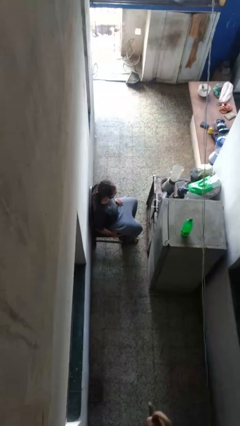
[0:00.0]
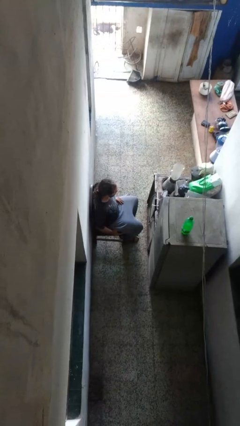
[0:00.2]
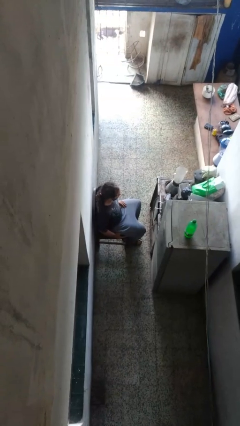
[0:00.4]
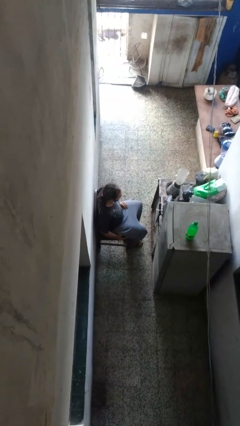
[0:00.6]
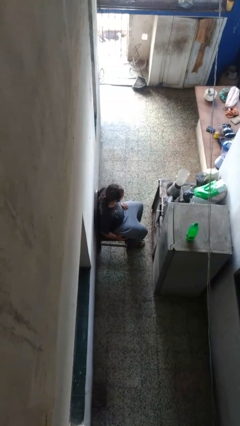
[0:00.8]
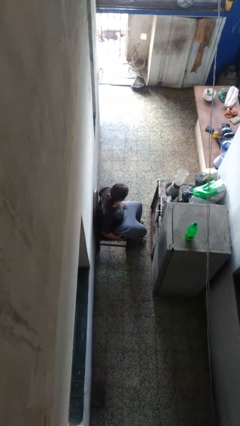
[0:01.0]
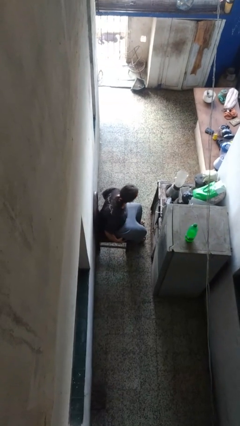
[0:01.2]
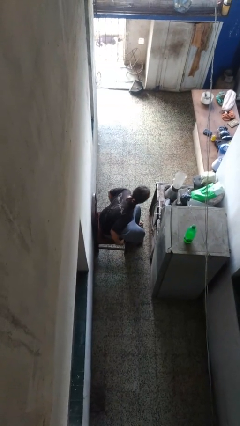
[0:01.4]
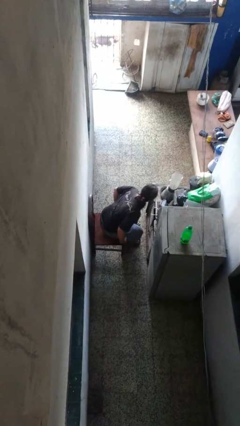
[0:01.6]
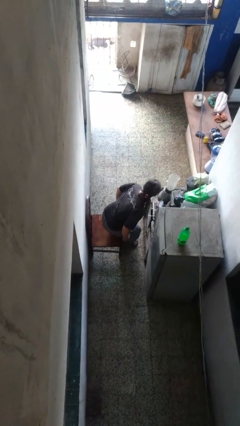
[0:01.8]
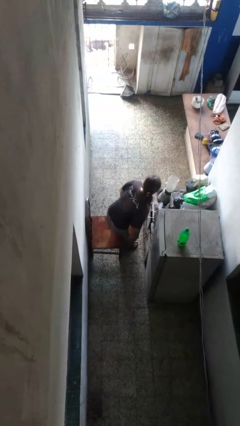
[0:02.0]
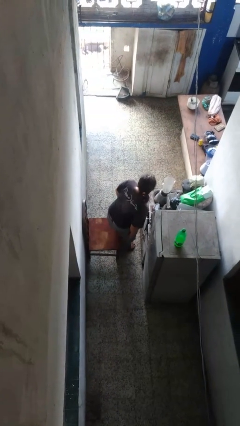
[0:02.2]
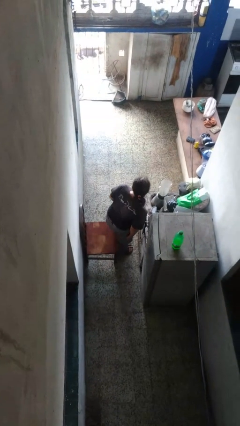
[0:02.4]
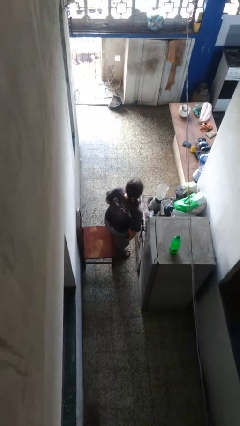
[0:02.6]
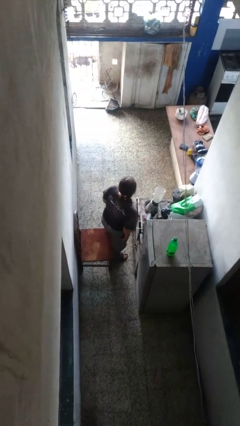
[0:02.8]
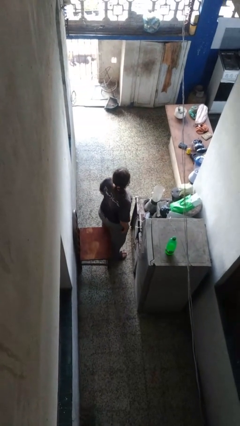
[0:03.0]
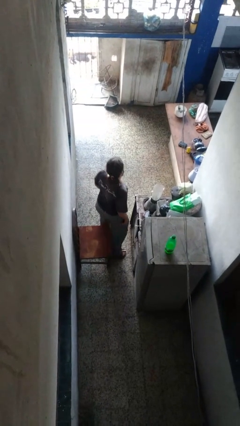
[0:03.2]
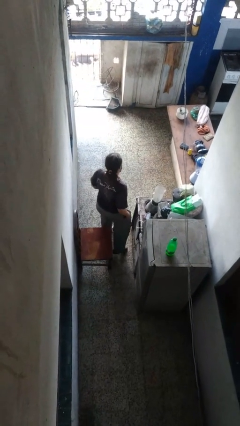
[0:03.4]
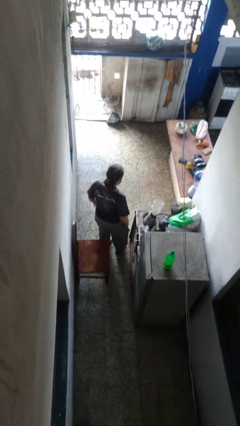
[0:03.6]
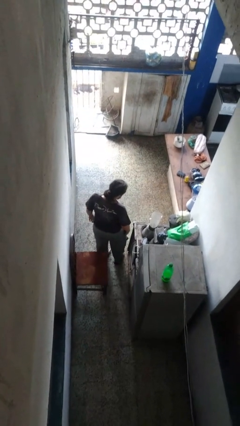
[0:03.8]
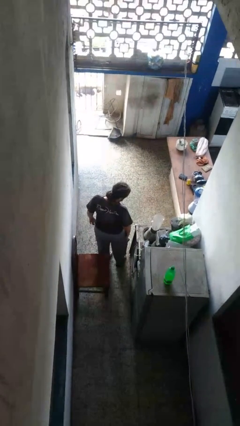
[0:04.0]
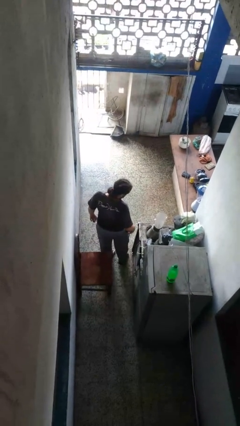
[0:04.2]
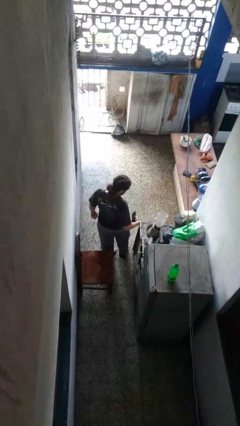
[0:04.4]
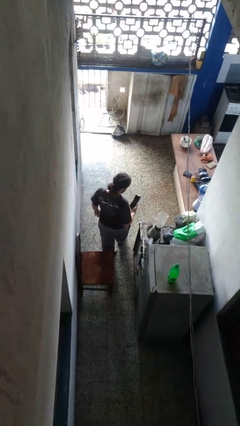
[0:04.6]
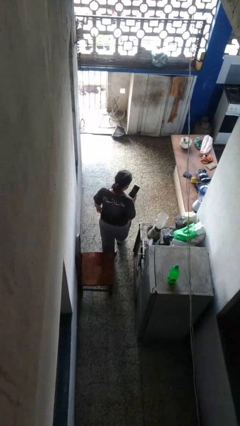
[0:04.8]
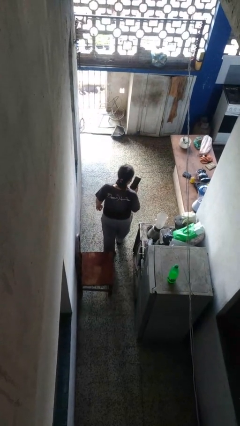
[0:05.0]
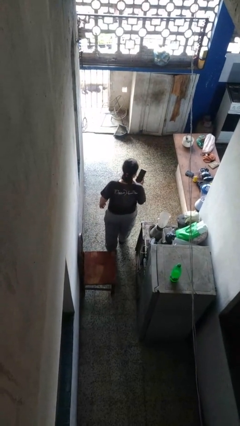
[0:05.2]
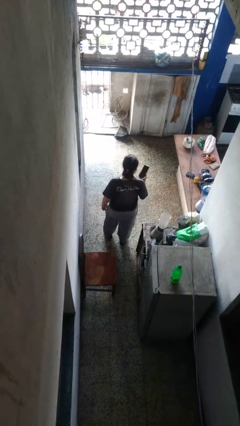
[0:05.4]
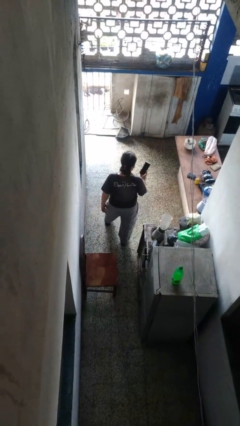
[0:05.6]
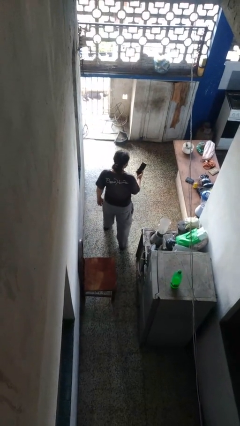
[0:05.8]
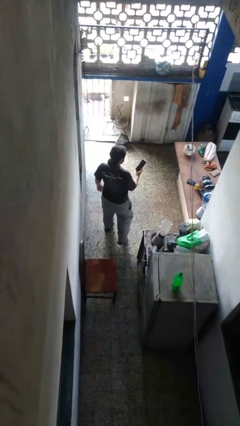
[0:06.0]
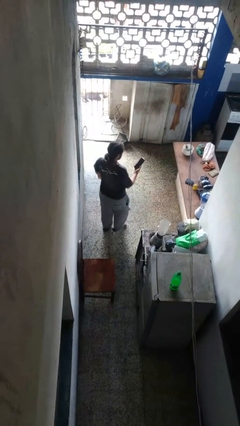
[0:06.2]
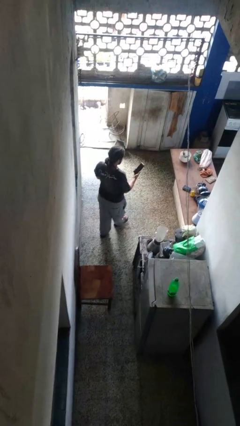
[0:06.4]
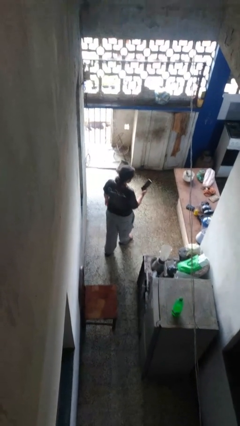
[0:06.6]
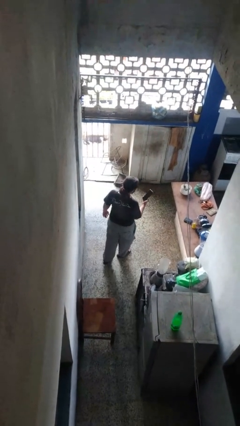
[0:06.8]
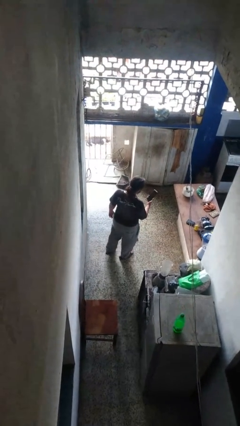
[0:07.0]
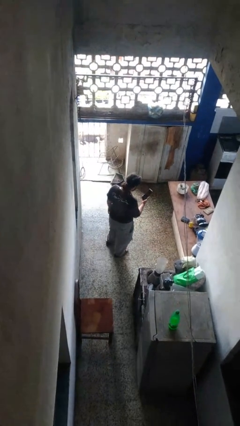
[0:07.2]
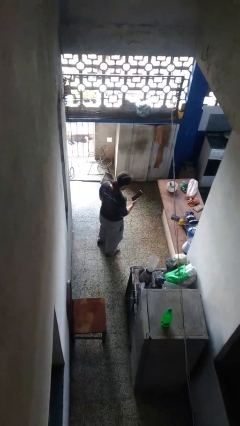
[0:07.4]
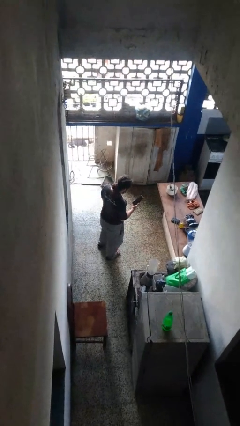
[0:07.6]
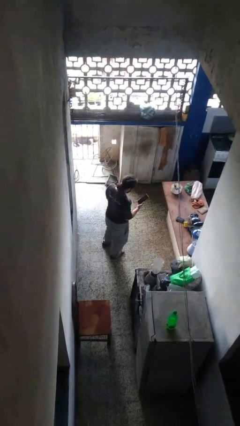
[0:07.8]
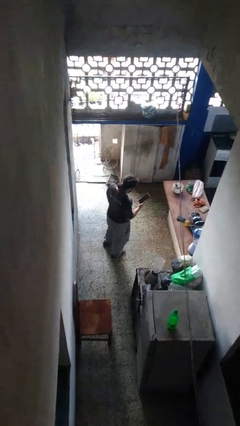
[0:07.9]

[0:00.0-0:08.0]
person takes phone from pocket

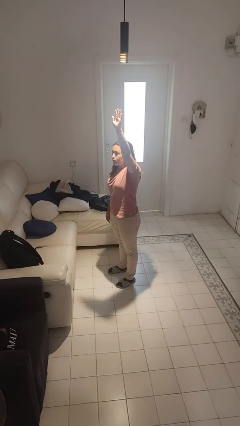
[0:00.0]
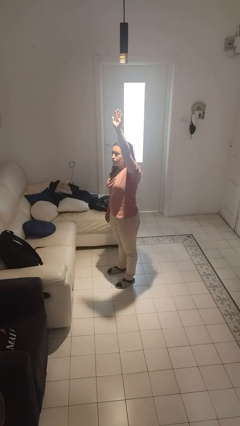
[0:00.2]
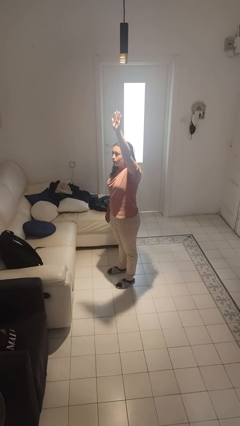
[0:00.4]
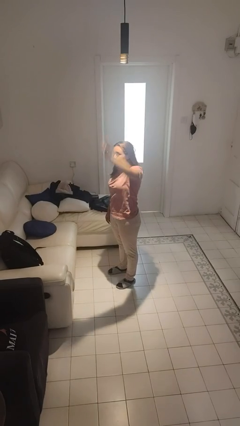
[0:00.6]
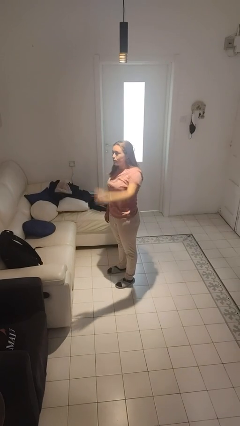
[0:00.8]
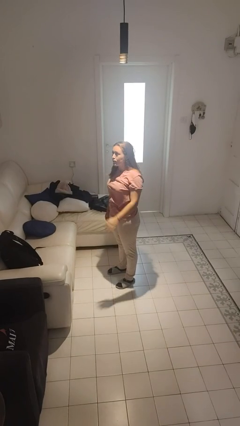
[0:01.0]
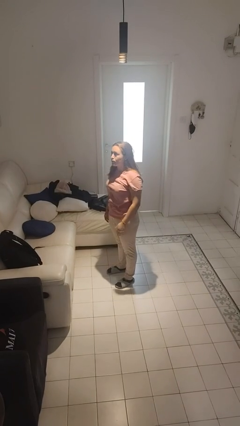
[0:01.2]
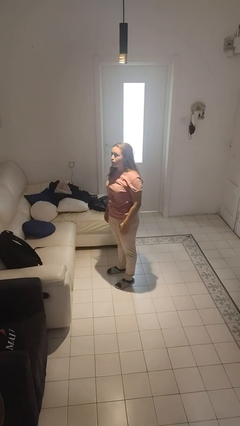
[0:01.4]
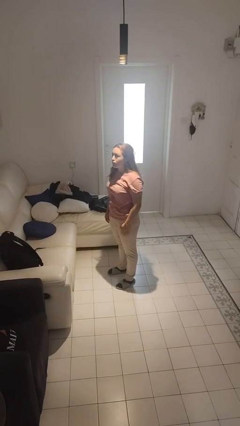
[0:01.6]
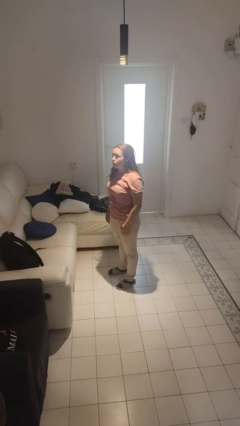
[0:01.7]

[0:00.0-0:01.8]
person gestures lower hand

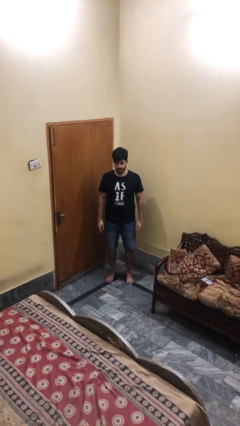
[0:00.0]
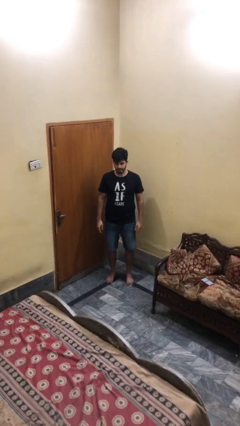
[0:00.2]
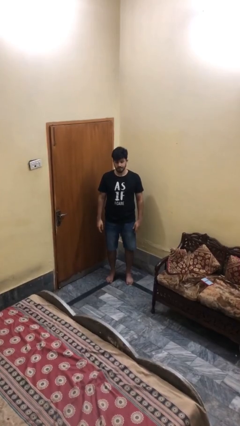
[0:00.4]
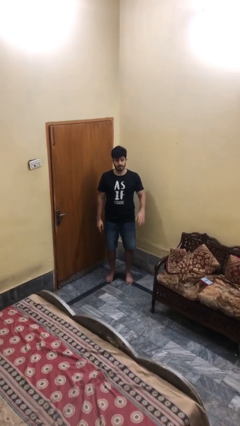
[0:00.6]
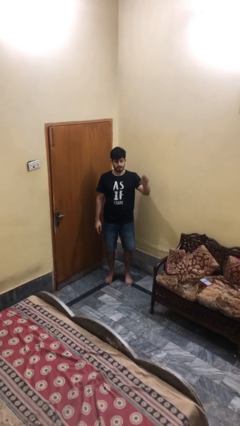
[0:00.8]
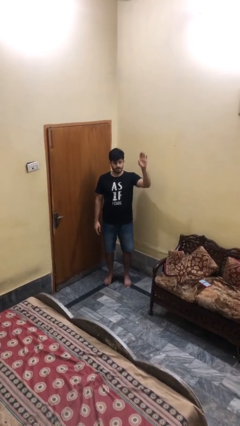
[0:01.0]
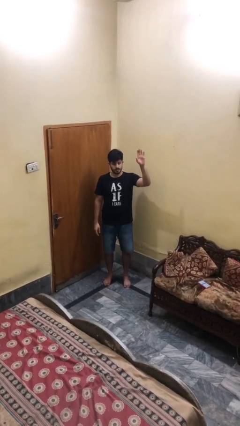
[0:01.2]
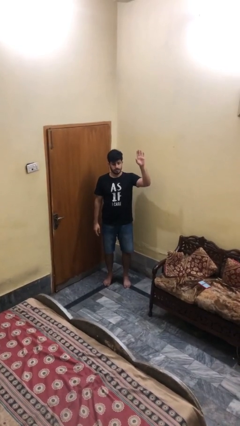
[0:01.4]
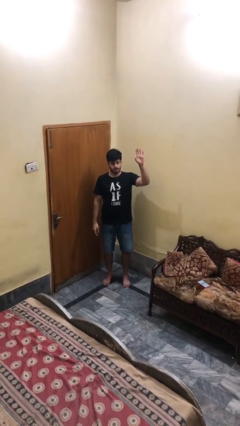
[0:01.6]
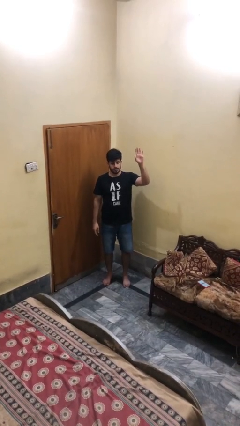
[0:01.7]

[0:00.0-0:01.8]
person gestures raise hand

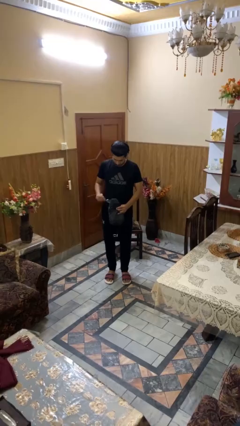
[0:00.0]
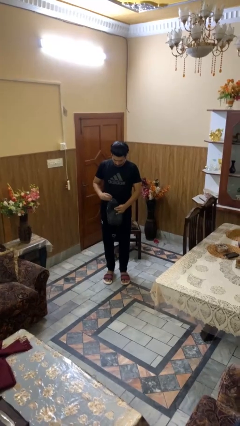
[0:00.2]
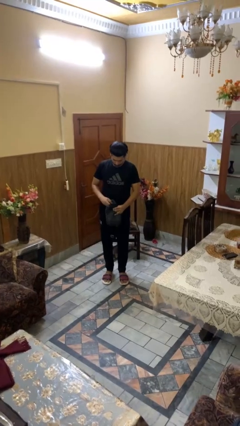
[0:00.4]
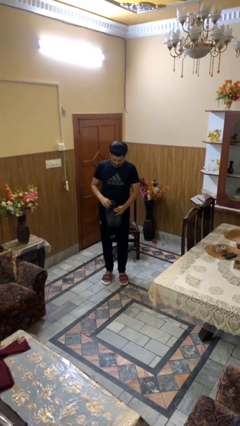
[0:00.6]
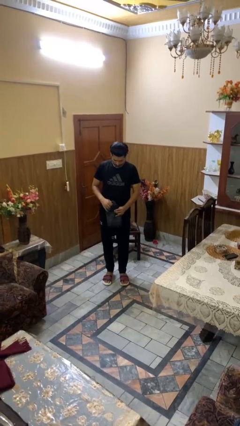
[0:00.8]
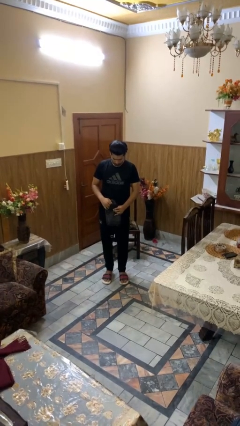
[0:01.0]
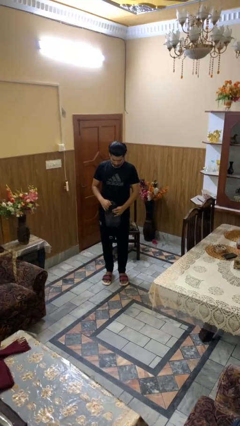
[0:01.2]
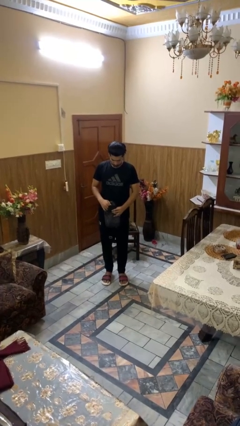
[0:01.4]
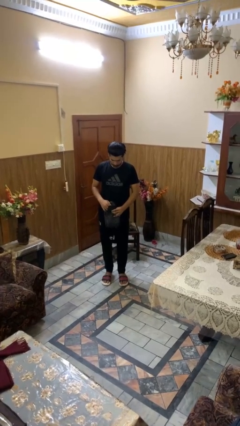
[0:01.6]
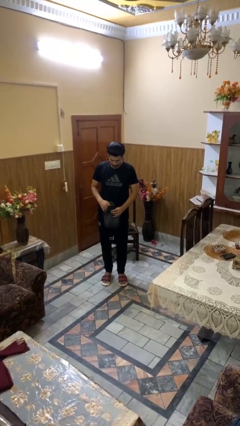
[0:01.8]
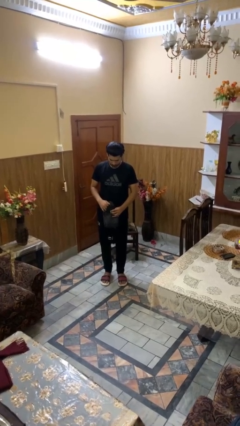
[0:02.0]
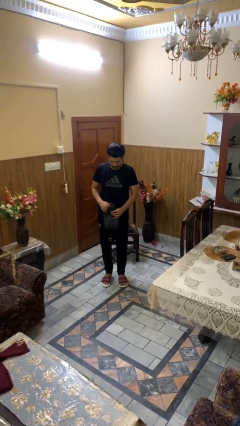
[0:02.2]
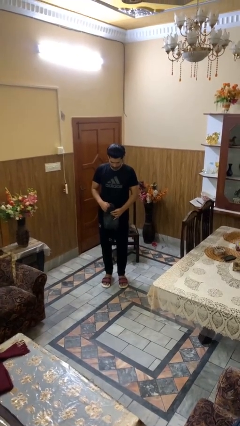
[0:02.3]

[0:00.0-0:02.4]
person puts object into purse

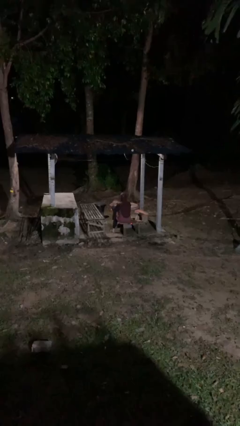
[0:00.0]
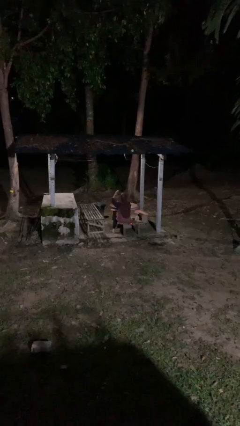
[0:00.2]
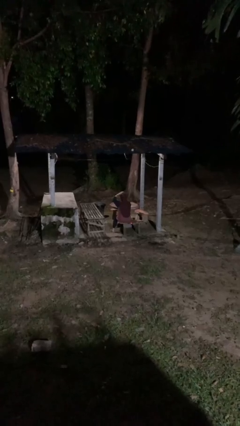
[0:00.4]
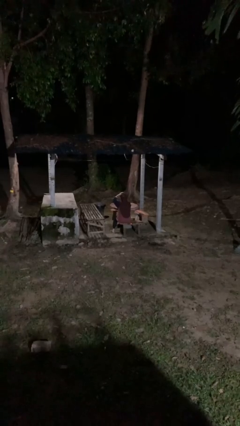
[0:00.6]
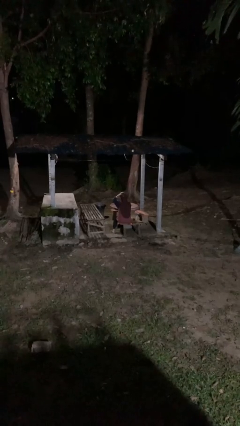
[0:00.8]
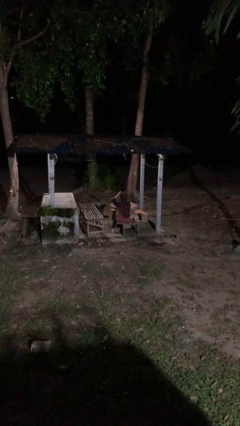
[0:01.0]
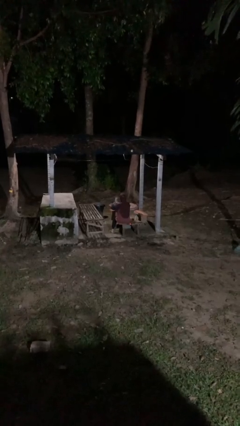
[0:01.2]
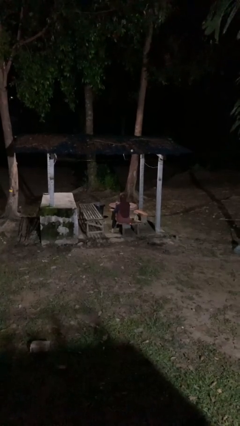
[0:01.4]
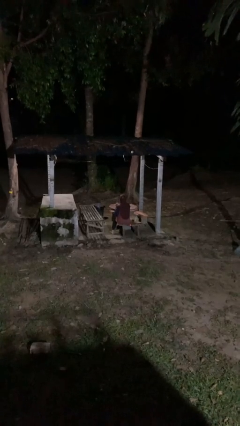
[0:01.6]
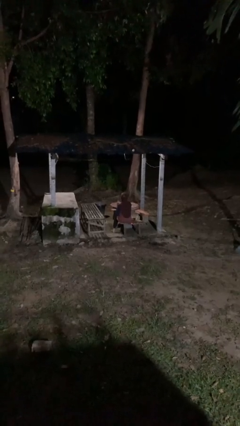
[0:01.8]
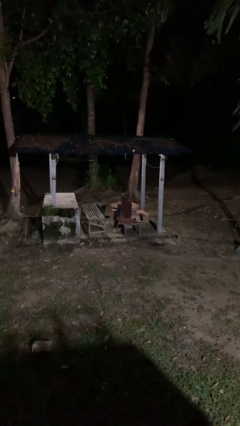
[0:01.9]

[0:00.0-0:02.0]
person pats head

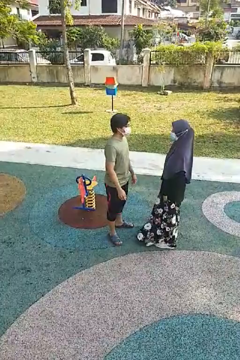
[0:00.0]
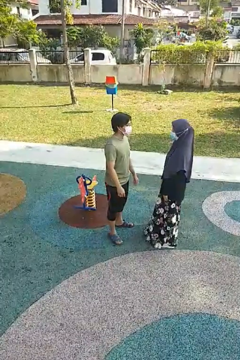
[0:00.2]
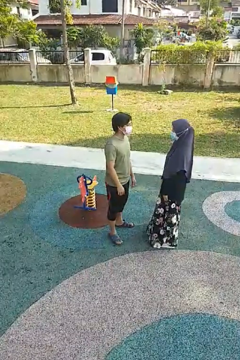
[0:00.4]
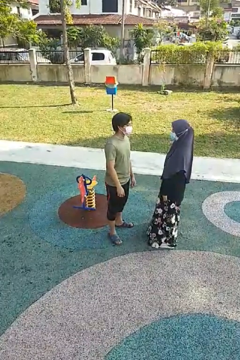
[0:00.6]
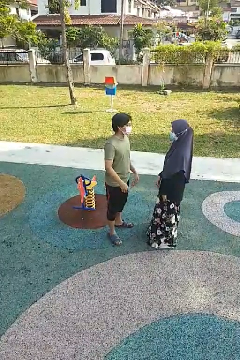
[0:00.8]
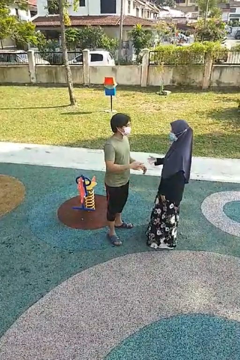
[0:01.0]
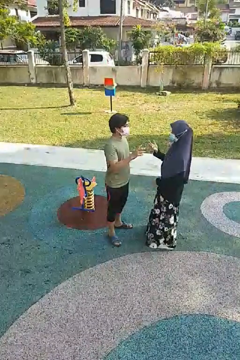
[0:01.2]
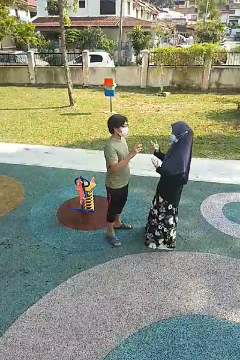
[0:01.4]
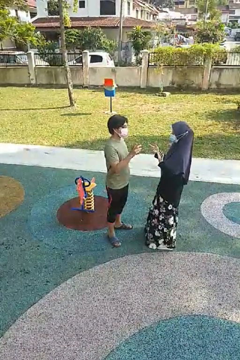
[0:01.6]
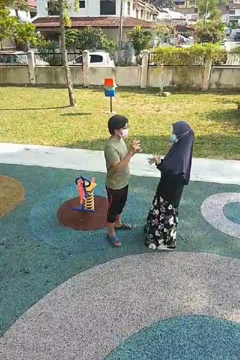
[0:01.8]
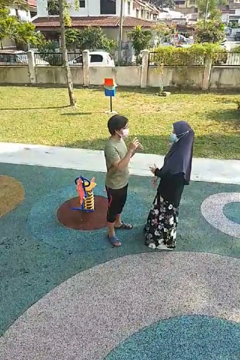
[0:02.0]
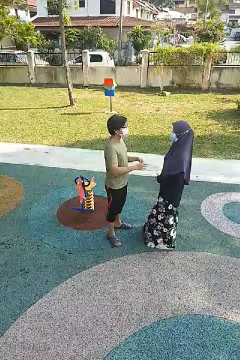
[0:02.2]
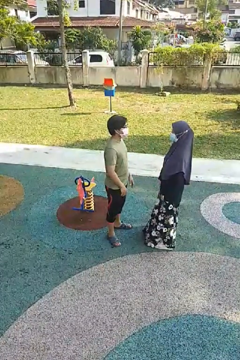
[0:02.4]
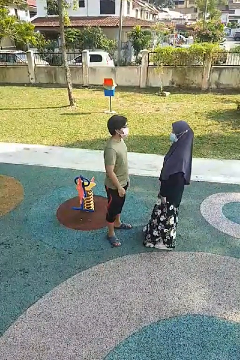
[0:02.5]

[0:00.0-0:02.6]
person talks to person
